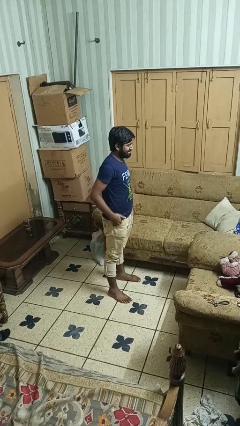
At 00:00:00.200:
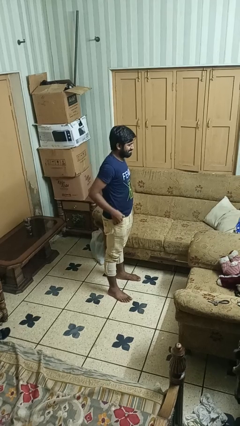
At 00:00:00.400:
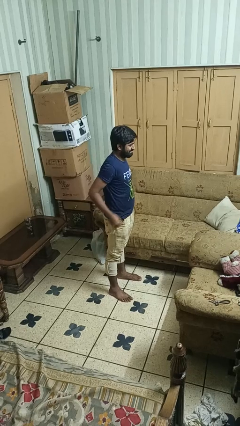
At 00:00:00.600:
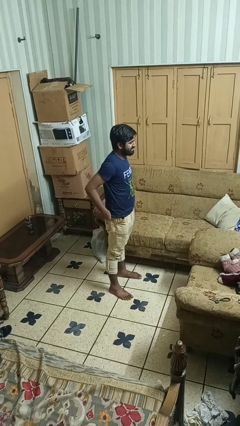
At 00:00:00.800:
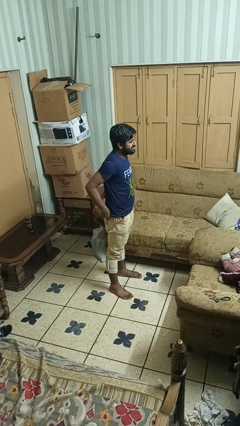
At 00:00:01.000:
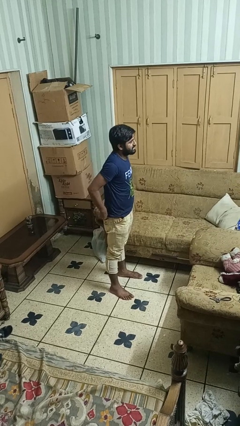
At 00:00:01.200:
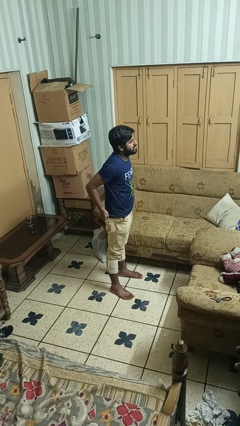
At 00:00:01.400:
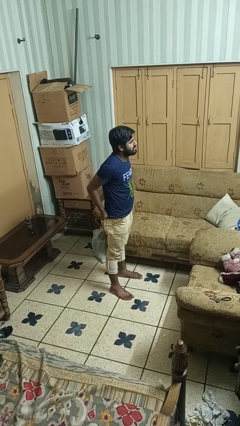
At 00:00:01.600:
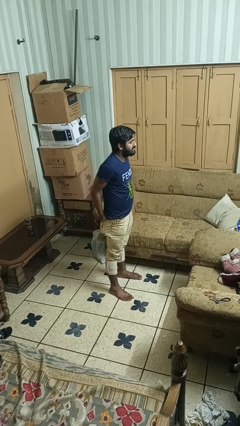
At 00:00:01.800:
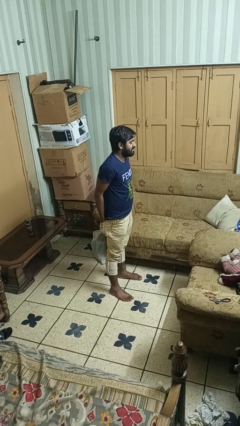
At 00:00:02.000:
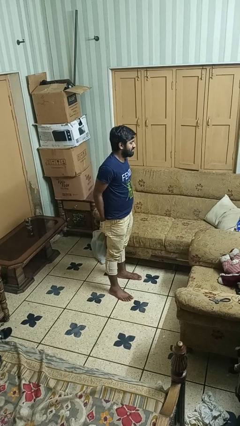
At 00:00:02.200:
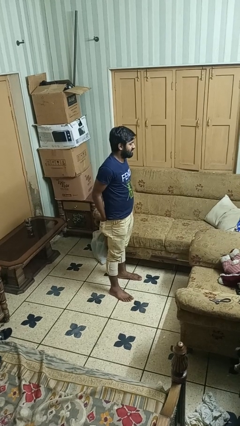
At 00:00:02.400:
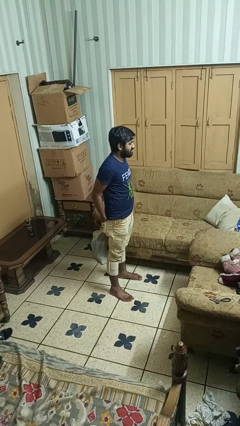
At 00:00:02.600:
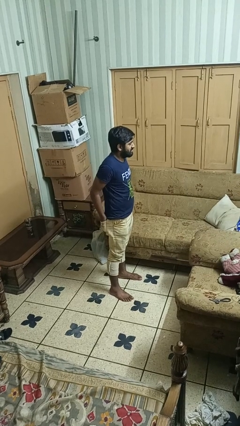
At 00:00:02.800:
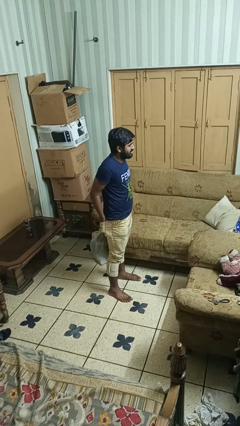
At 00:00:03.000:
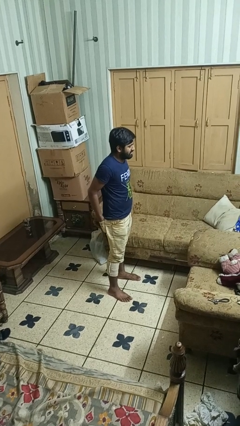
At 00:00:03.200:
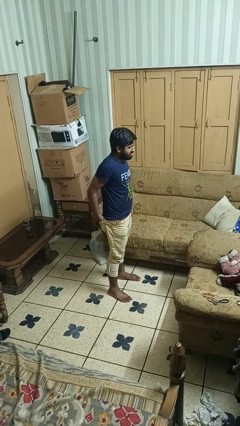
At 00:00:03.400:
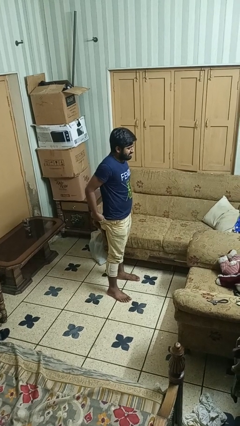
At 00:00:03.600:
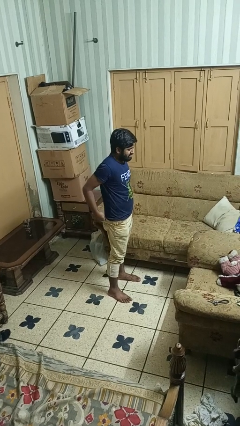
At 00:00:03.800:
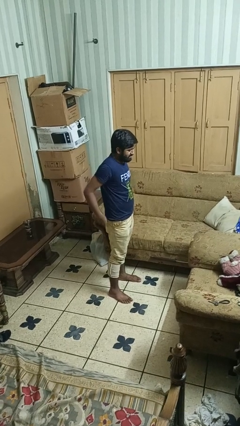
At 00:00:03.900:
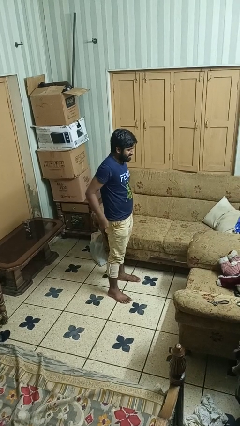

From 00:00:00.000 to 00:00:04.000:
person puts hands in back pockets

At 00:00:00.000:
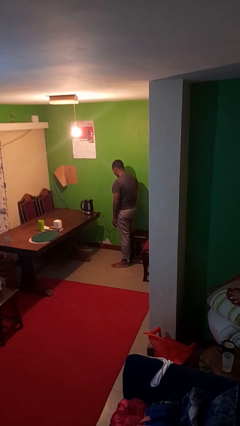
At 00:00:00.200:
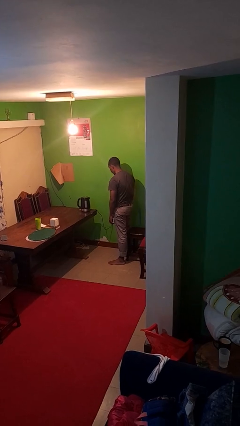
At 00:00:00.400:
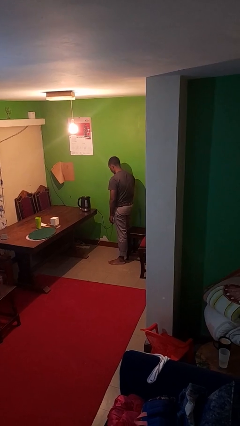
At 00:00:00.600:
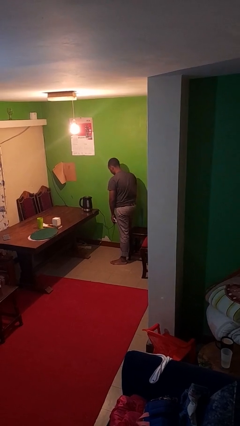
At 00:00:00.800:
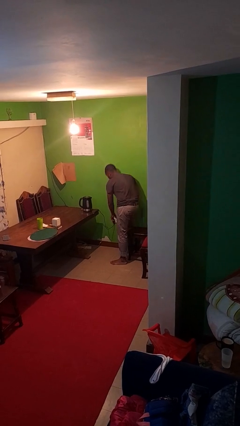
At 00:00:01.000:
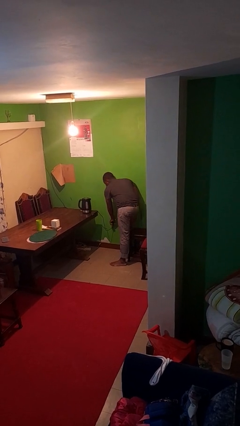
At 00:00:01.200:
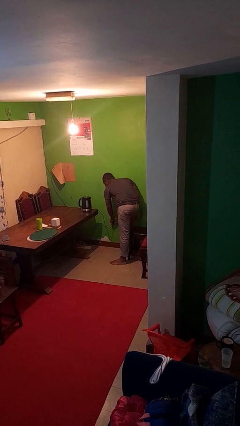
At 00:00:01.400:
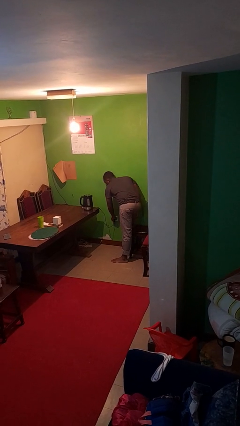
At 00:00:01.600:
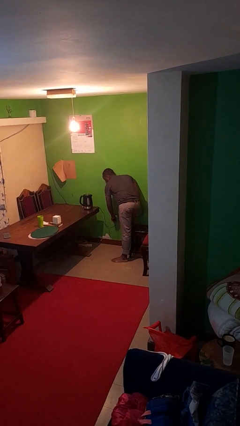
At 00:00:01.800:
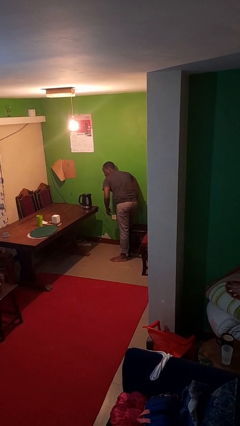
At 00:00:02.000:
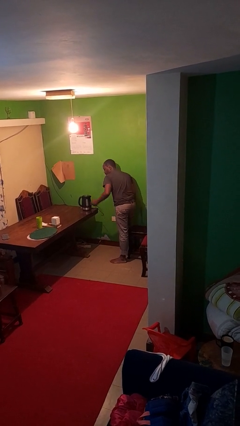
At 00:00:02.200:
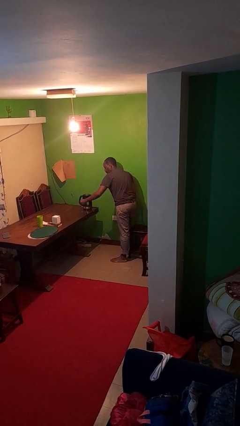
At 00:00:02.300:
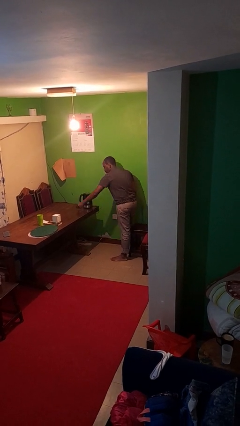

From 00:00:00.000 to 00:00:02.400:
person unplugs from electrical socket

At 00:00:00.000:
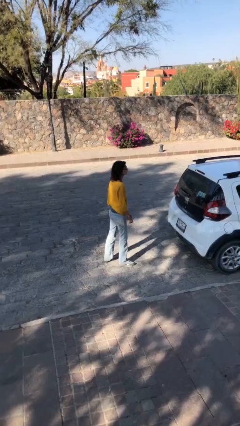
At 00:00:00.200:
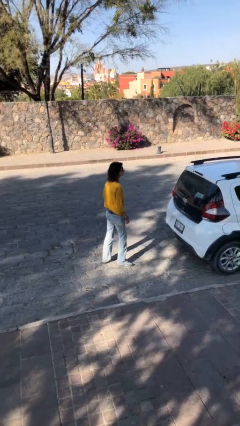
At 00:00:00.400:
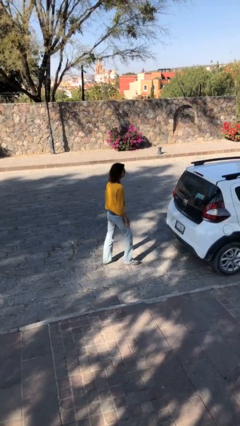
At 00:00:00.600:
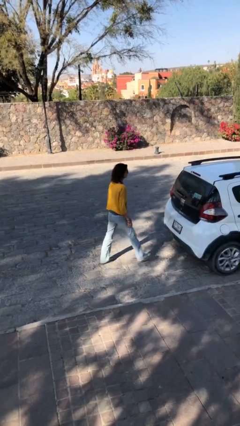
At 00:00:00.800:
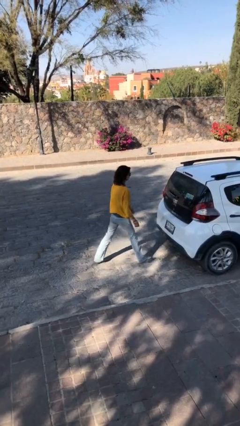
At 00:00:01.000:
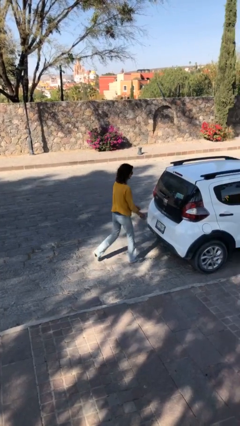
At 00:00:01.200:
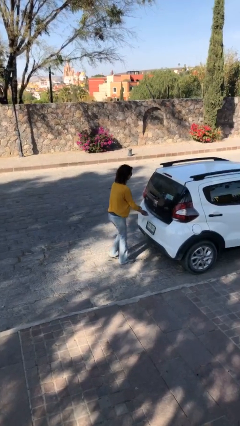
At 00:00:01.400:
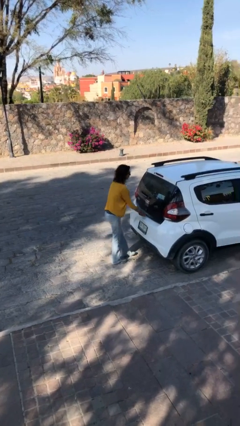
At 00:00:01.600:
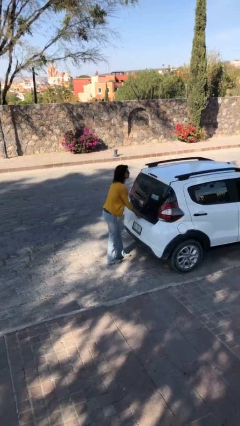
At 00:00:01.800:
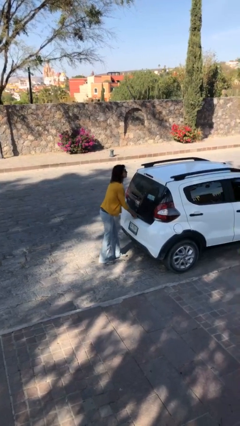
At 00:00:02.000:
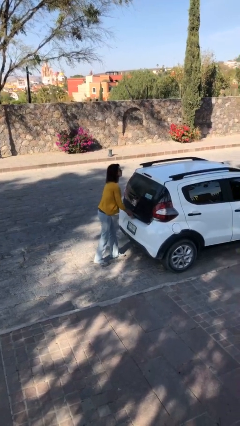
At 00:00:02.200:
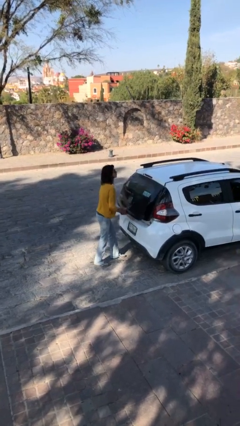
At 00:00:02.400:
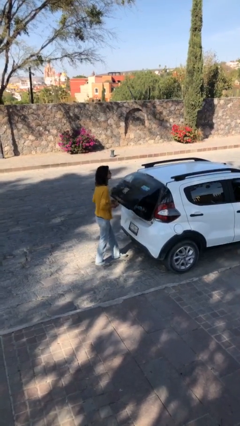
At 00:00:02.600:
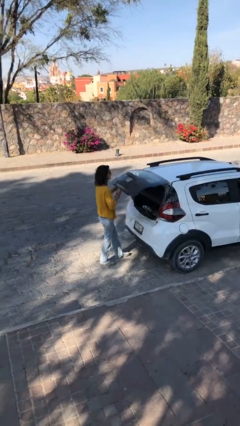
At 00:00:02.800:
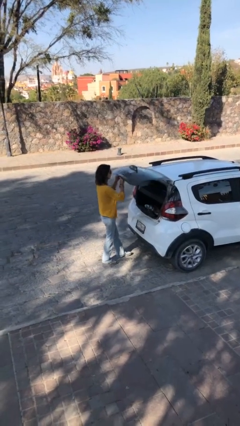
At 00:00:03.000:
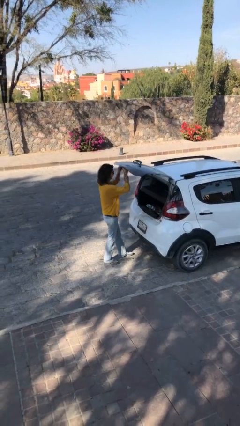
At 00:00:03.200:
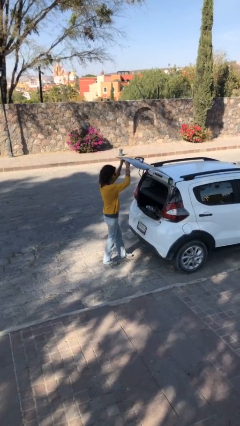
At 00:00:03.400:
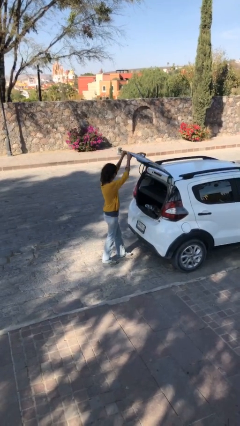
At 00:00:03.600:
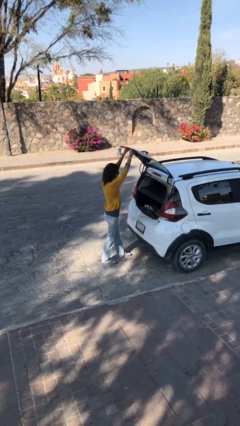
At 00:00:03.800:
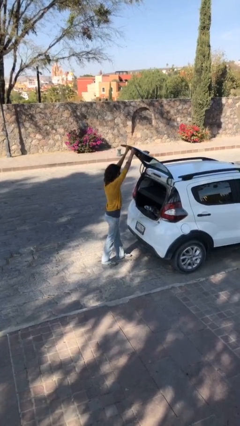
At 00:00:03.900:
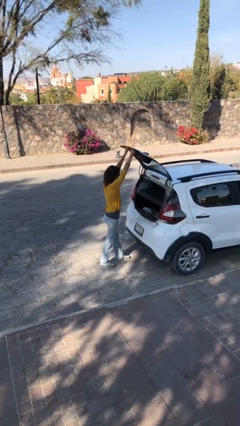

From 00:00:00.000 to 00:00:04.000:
person opens car trunk

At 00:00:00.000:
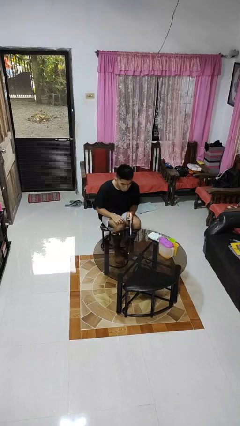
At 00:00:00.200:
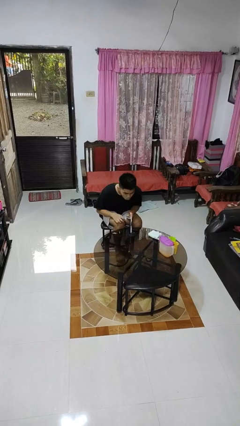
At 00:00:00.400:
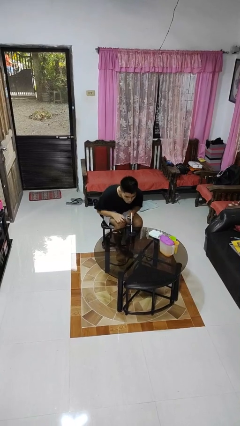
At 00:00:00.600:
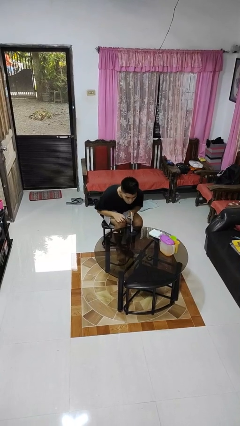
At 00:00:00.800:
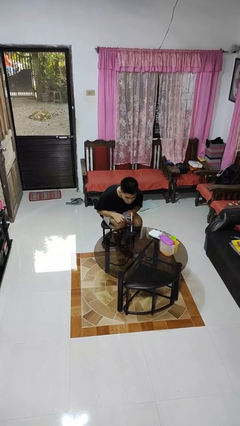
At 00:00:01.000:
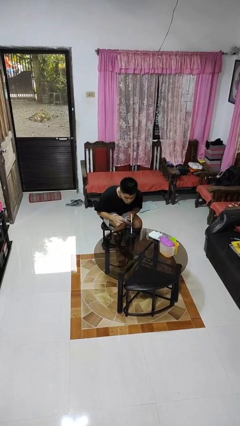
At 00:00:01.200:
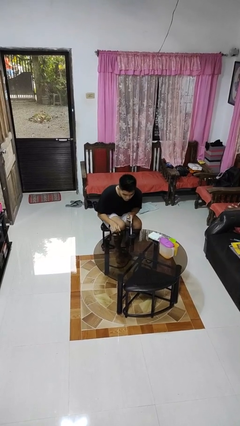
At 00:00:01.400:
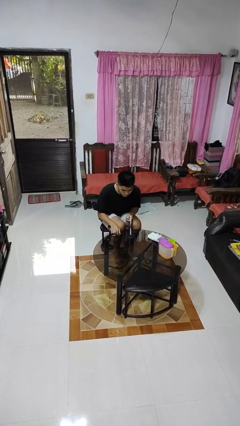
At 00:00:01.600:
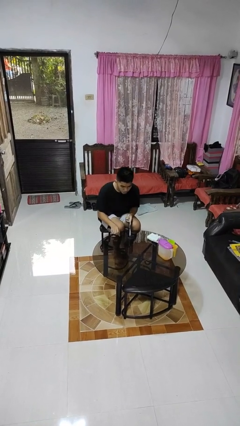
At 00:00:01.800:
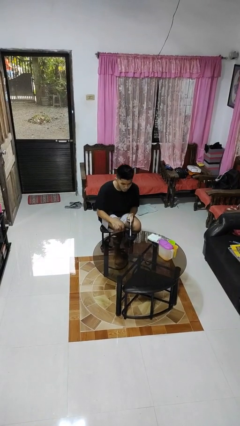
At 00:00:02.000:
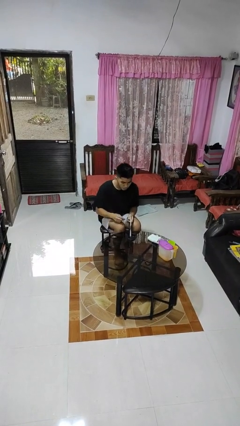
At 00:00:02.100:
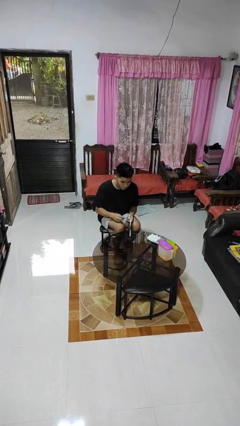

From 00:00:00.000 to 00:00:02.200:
person extinguishes candle

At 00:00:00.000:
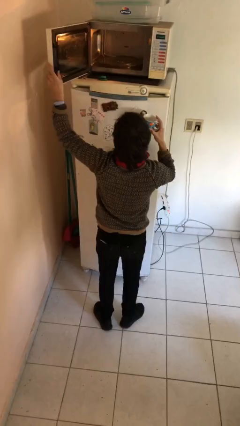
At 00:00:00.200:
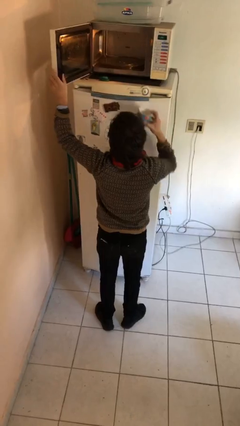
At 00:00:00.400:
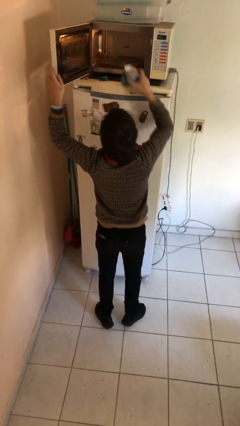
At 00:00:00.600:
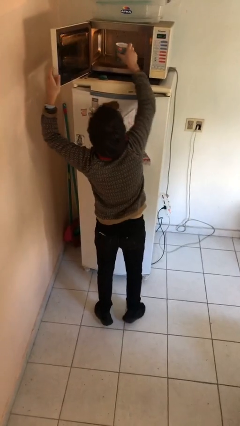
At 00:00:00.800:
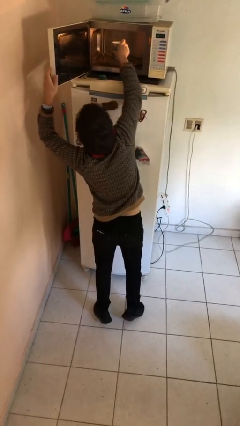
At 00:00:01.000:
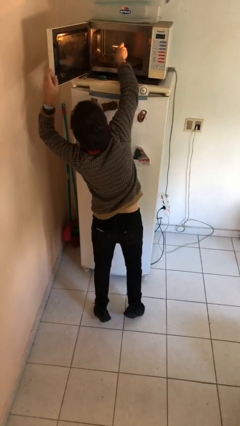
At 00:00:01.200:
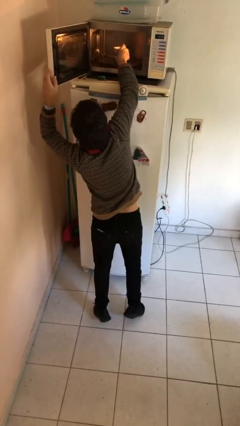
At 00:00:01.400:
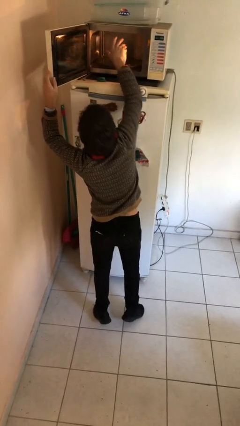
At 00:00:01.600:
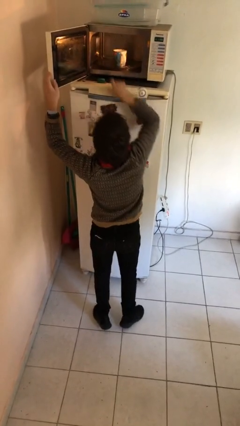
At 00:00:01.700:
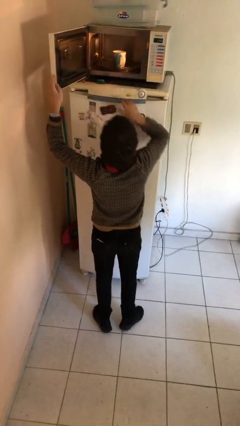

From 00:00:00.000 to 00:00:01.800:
person puts object into microwave

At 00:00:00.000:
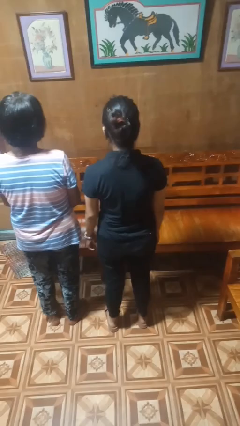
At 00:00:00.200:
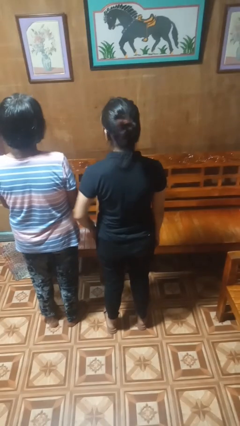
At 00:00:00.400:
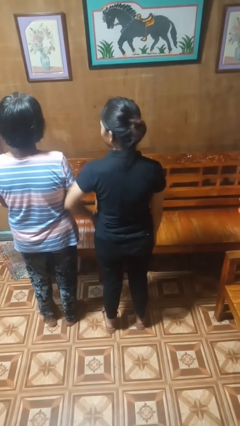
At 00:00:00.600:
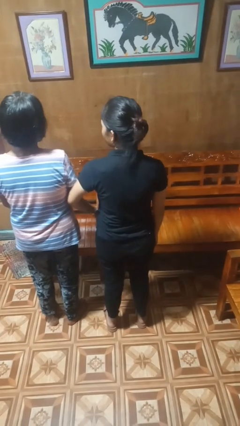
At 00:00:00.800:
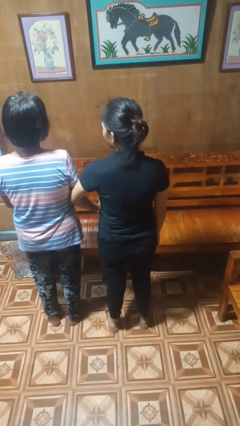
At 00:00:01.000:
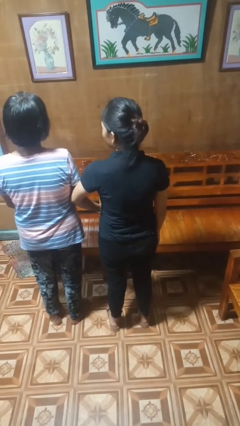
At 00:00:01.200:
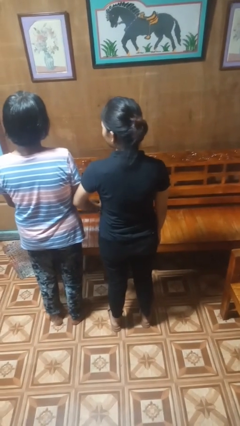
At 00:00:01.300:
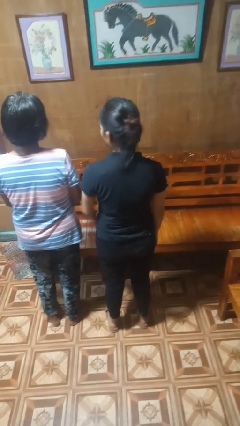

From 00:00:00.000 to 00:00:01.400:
person nudges person with elbow

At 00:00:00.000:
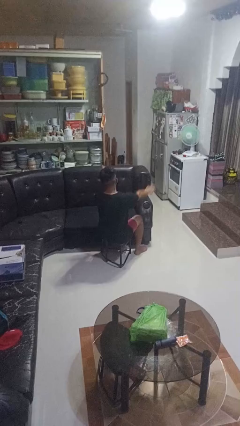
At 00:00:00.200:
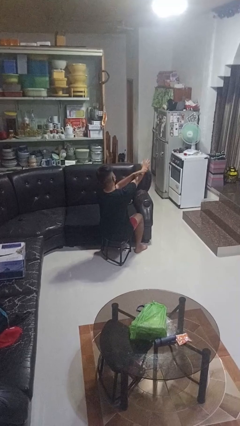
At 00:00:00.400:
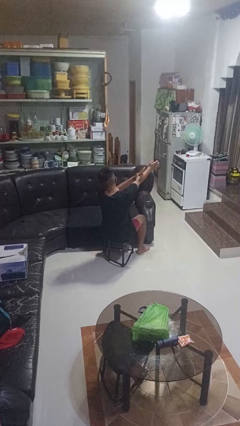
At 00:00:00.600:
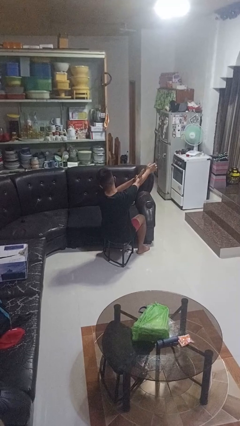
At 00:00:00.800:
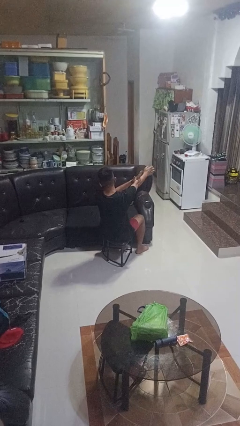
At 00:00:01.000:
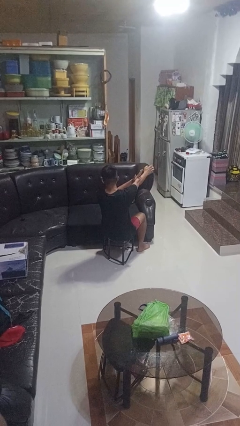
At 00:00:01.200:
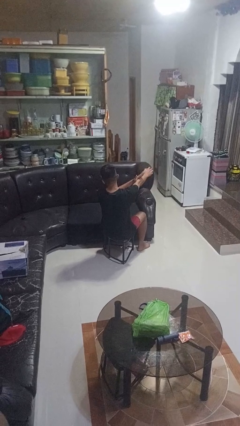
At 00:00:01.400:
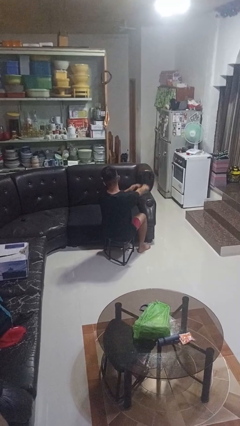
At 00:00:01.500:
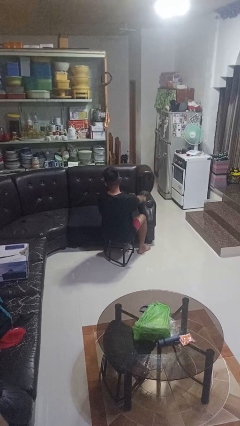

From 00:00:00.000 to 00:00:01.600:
person swats bug
